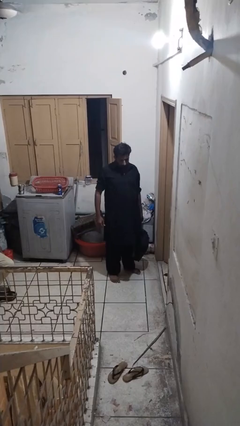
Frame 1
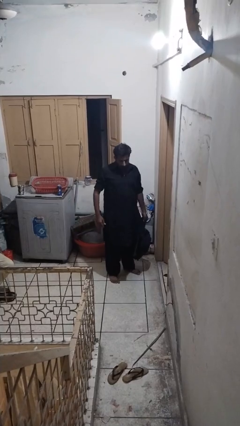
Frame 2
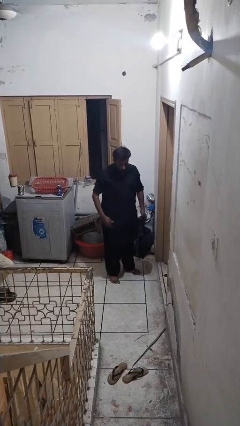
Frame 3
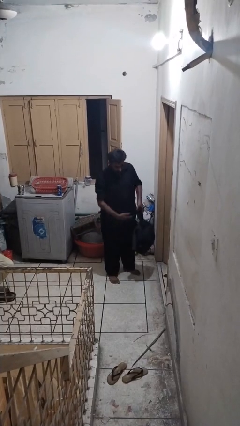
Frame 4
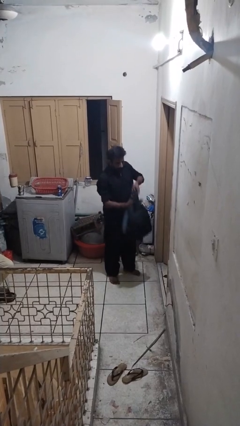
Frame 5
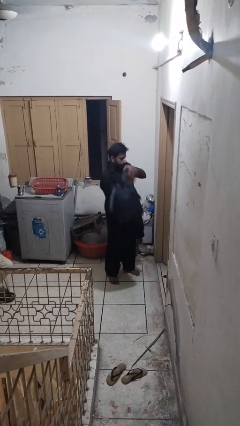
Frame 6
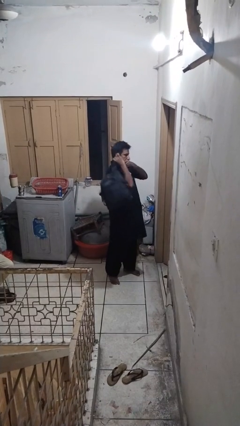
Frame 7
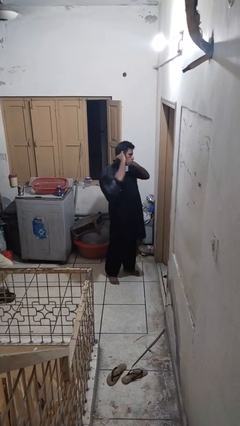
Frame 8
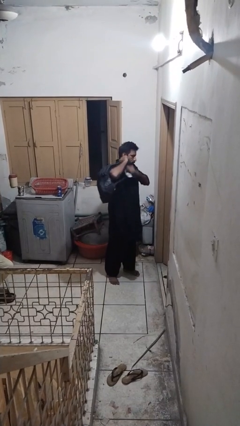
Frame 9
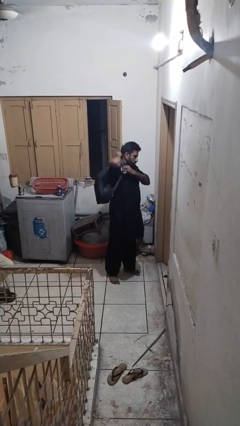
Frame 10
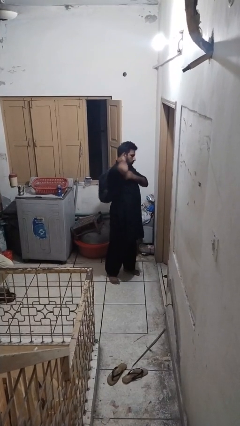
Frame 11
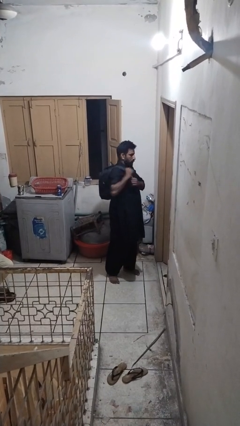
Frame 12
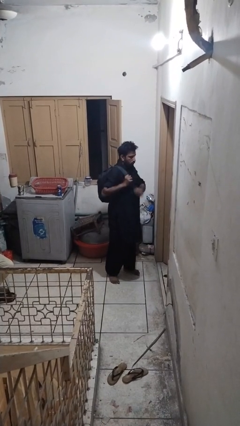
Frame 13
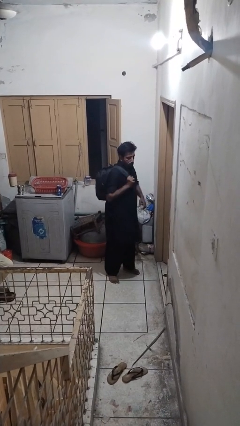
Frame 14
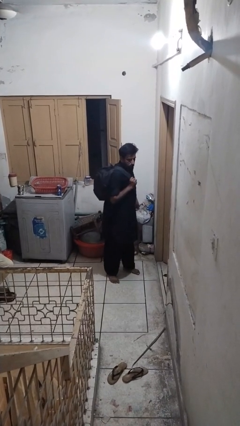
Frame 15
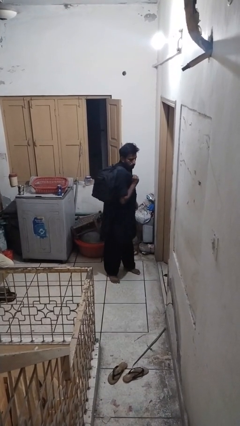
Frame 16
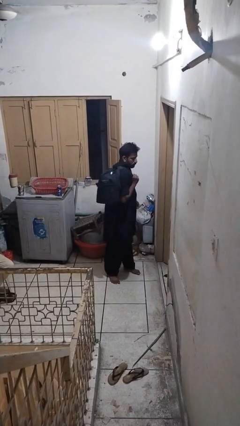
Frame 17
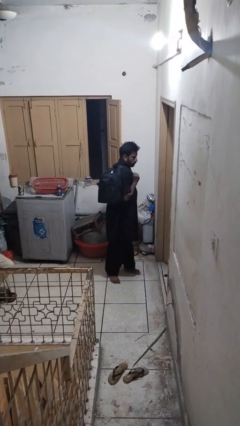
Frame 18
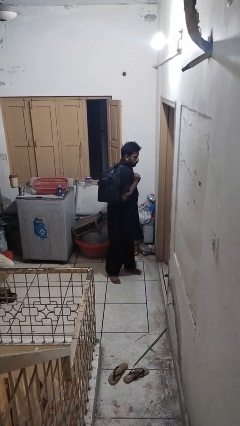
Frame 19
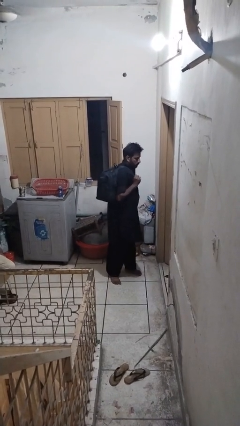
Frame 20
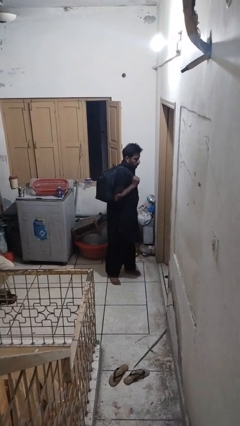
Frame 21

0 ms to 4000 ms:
person puts on backpack

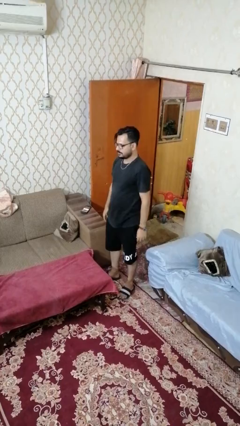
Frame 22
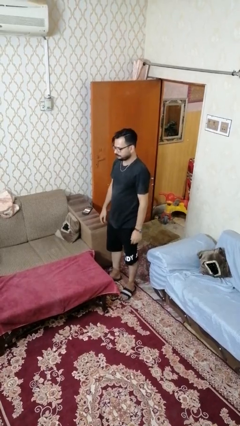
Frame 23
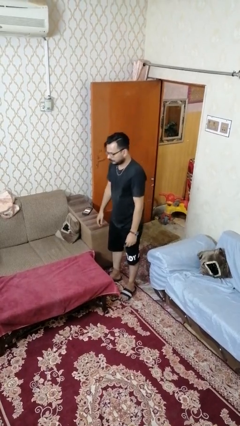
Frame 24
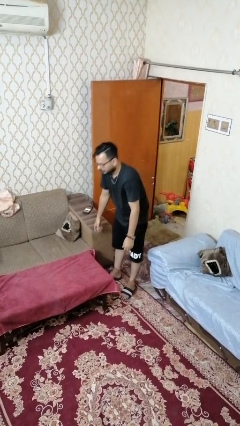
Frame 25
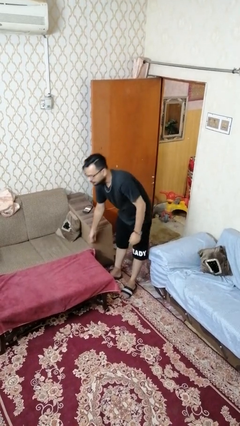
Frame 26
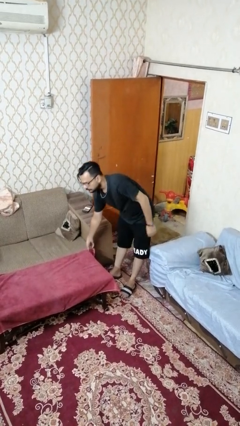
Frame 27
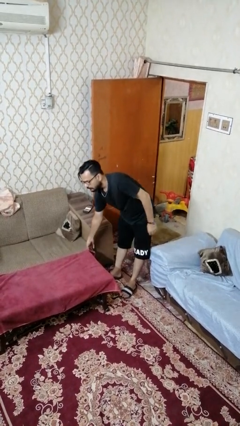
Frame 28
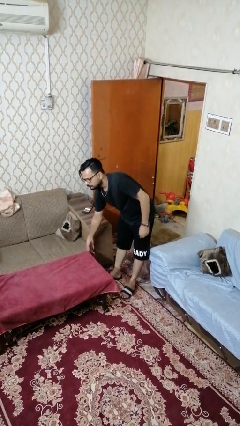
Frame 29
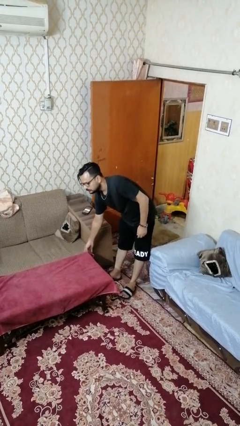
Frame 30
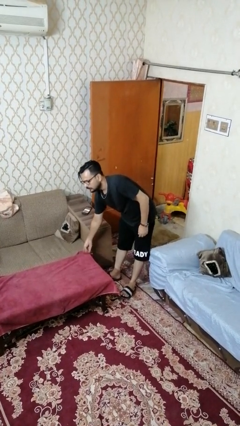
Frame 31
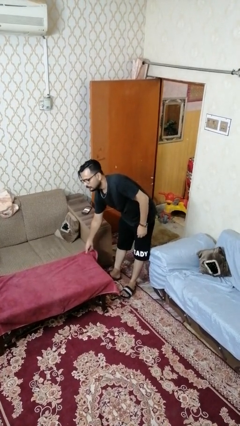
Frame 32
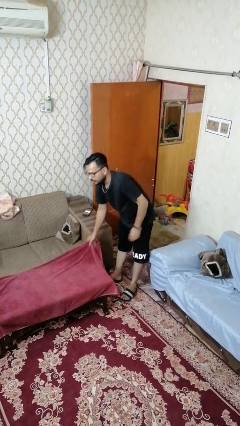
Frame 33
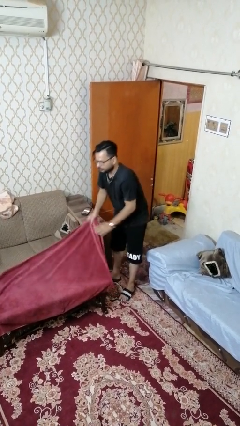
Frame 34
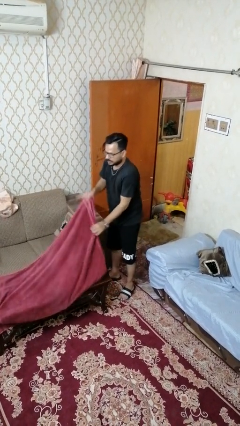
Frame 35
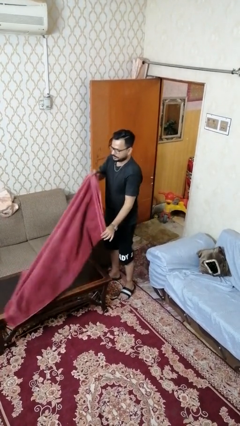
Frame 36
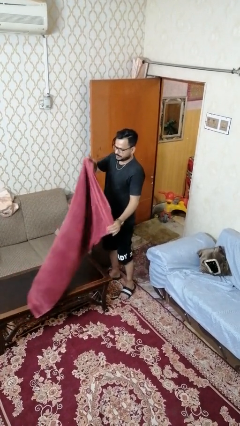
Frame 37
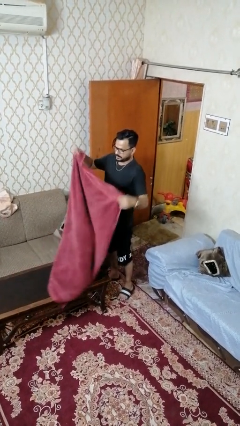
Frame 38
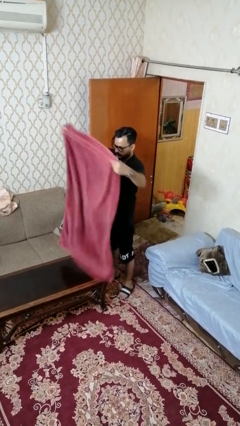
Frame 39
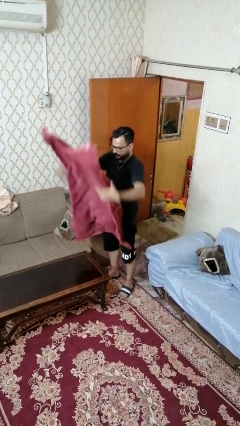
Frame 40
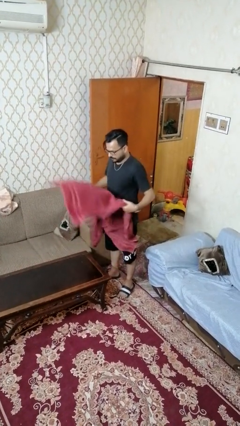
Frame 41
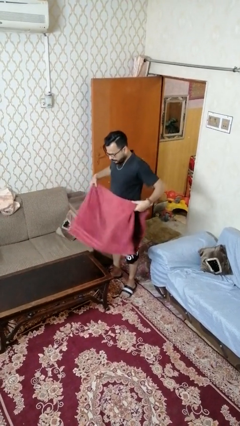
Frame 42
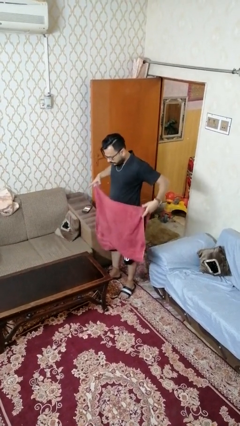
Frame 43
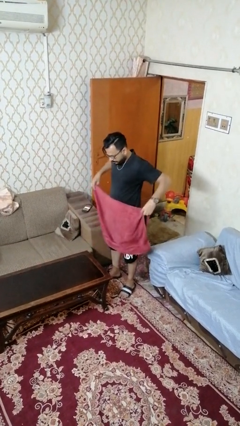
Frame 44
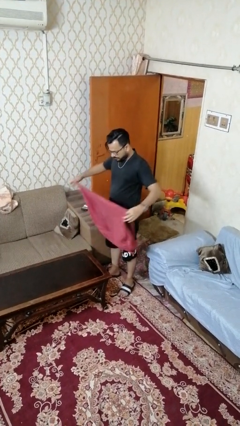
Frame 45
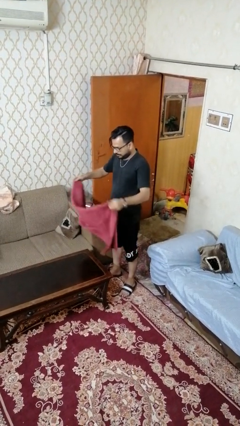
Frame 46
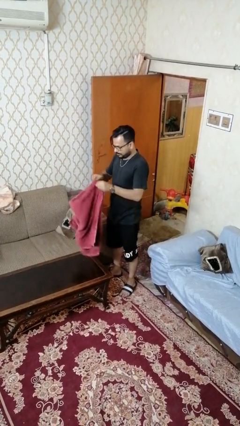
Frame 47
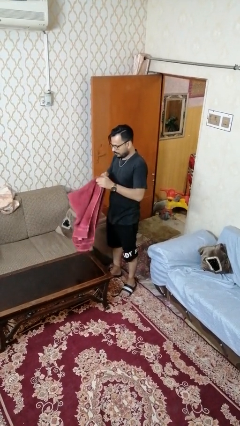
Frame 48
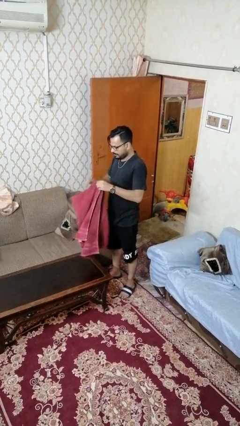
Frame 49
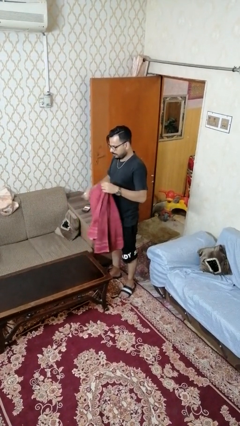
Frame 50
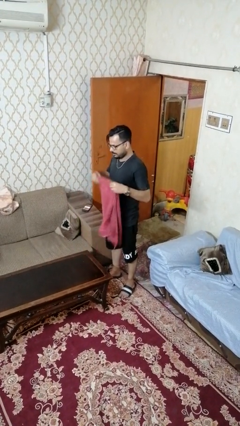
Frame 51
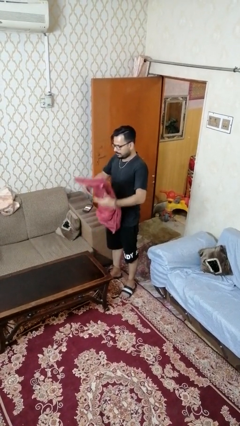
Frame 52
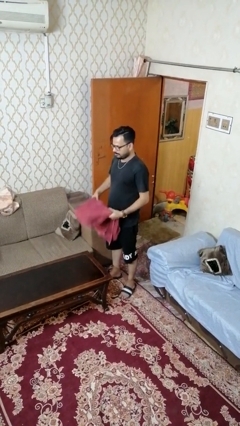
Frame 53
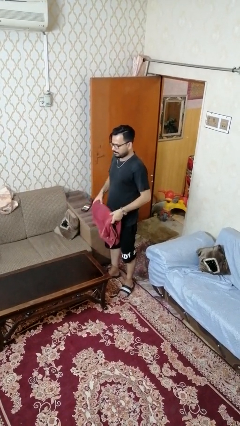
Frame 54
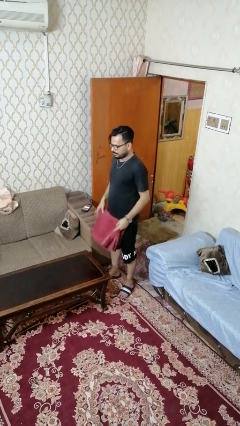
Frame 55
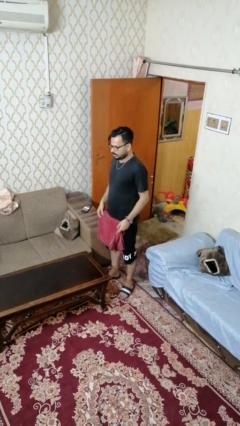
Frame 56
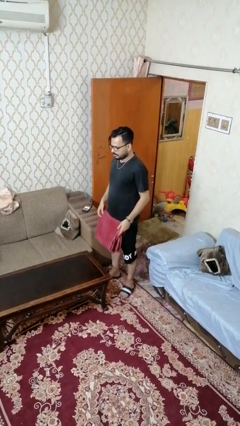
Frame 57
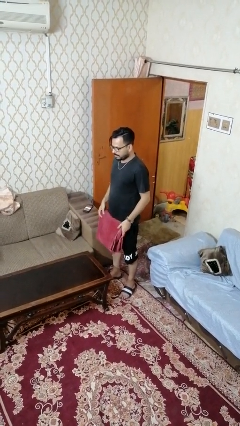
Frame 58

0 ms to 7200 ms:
person folds tablecloth

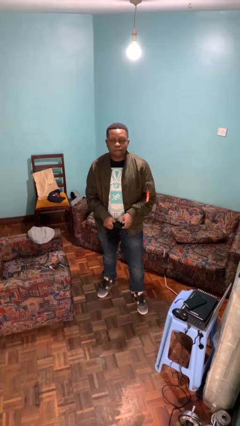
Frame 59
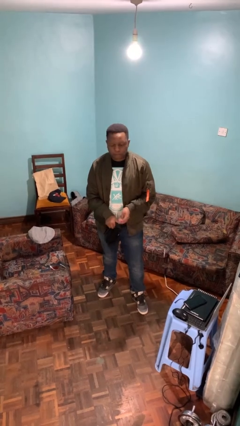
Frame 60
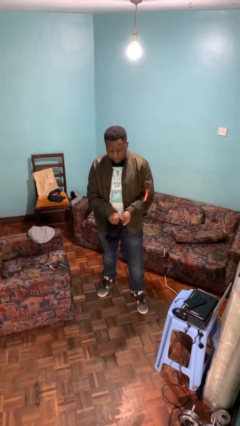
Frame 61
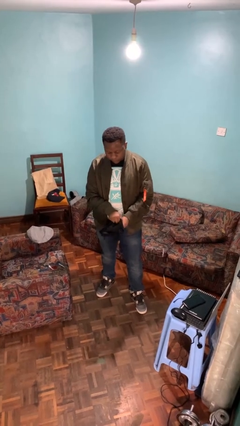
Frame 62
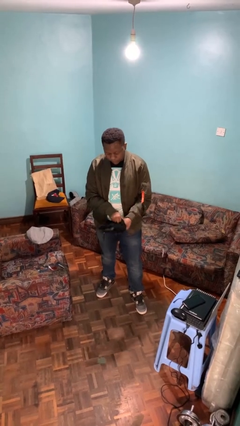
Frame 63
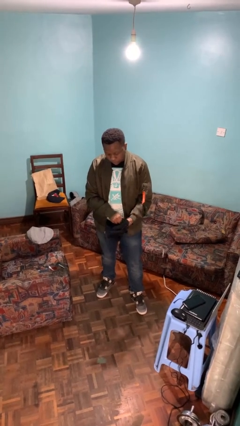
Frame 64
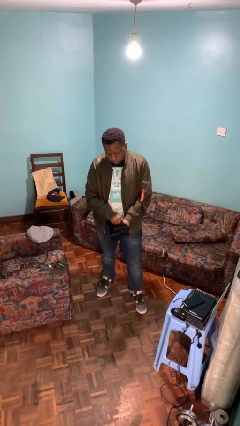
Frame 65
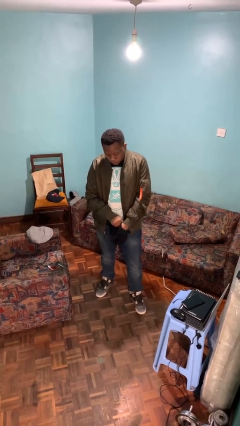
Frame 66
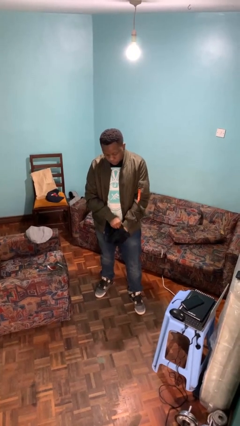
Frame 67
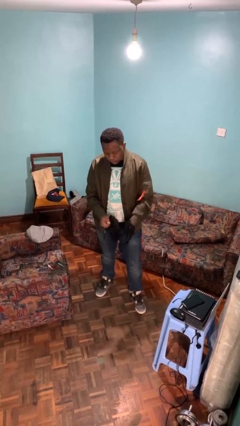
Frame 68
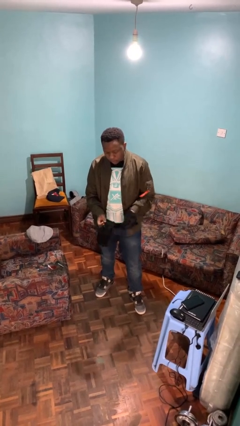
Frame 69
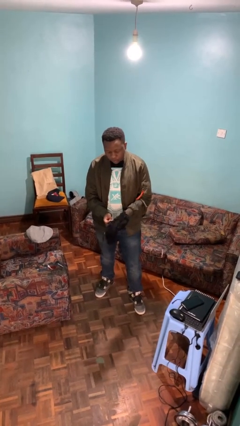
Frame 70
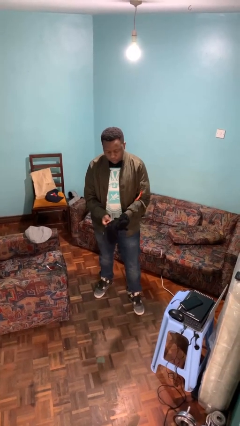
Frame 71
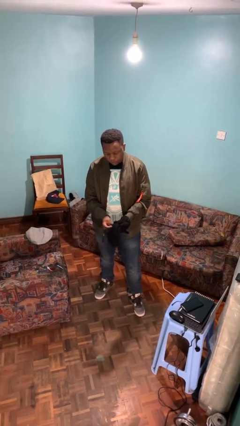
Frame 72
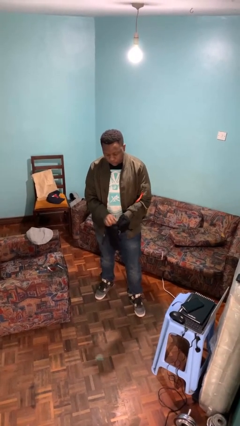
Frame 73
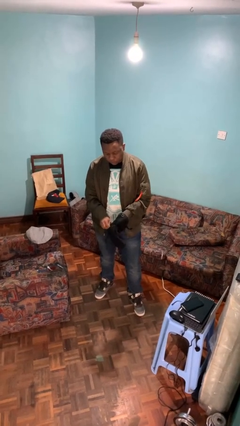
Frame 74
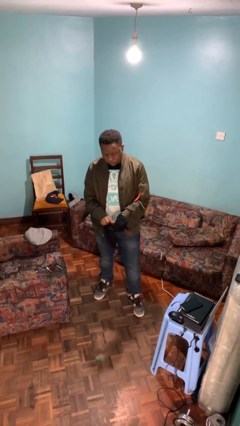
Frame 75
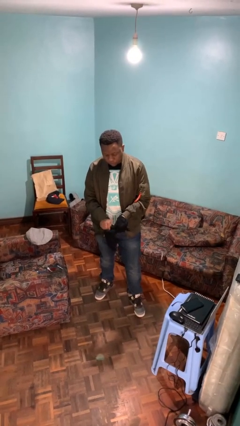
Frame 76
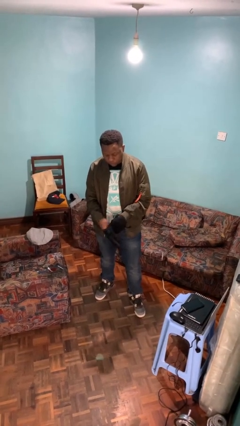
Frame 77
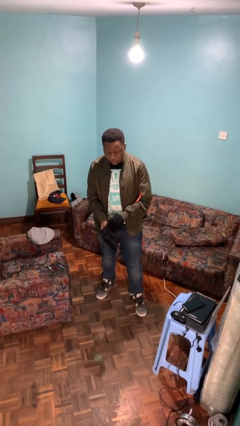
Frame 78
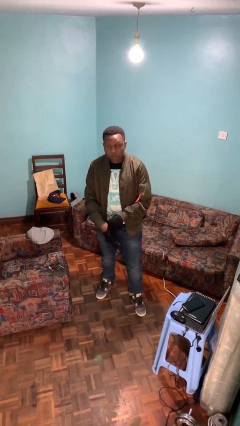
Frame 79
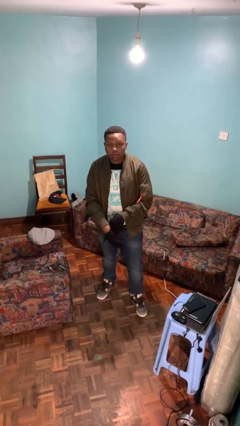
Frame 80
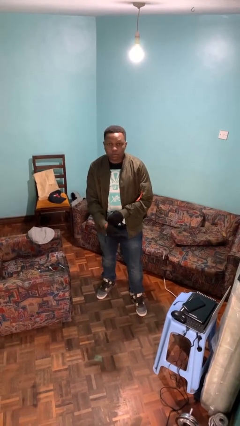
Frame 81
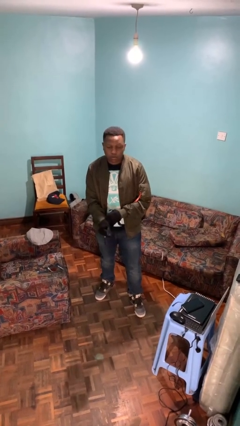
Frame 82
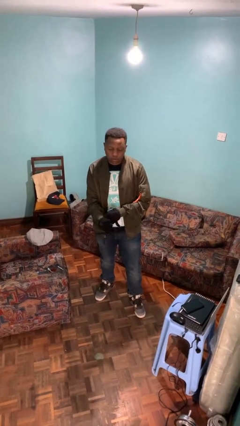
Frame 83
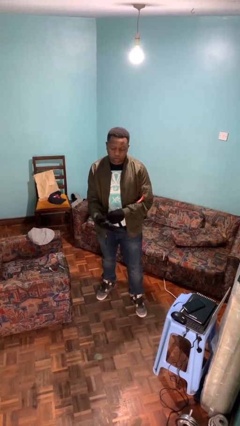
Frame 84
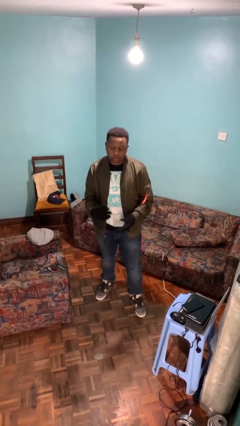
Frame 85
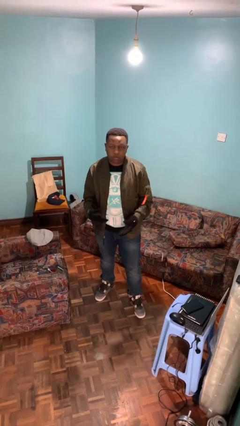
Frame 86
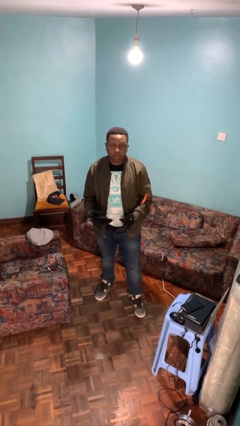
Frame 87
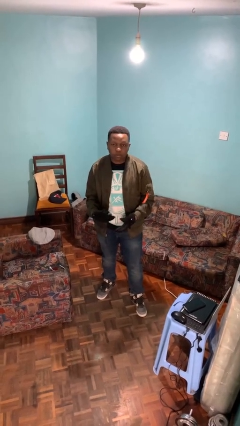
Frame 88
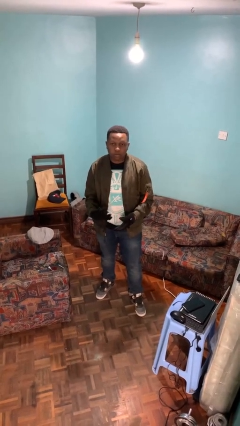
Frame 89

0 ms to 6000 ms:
person puts on gloves

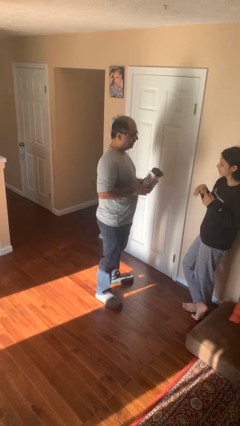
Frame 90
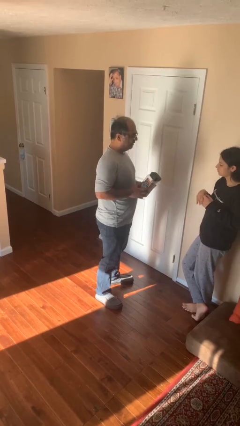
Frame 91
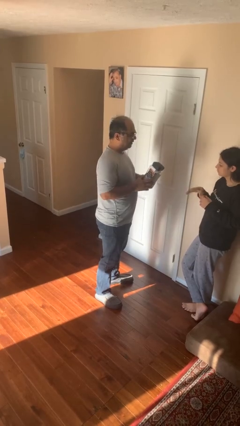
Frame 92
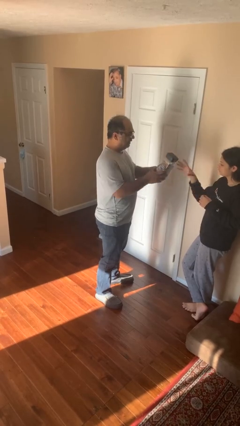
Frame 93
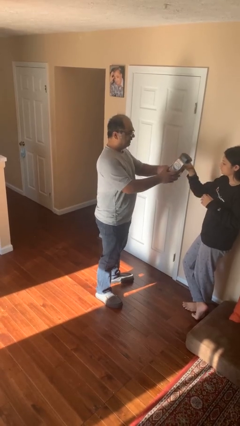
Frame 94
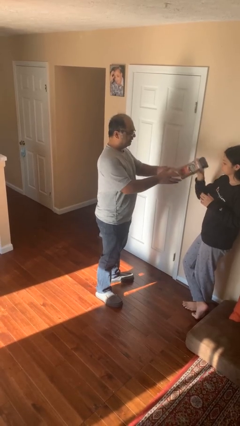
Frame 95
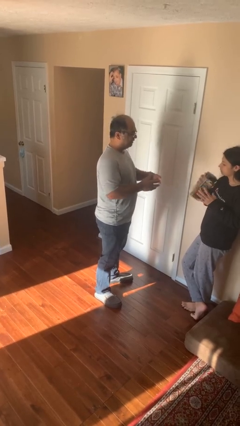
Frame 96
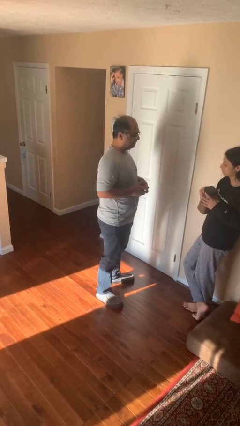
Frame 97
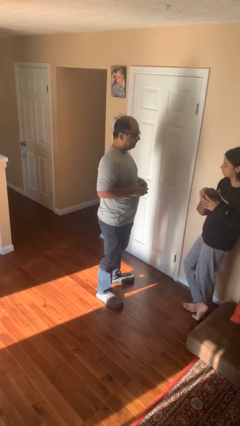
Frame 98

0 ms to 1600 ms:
person transfers object to person
